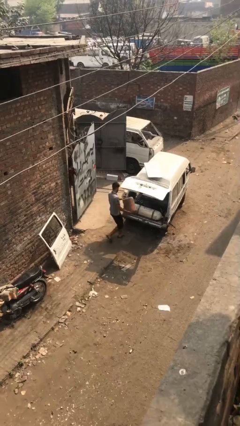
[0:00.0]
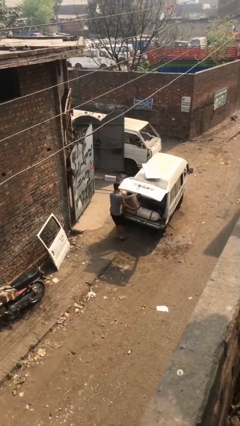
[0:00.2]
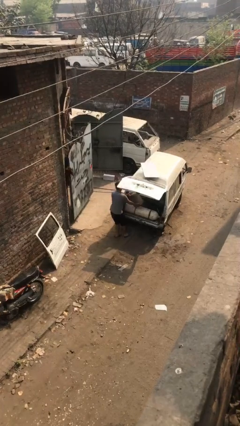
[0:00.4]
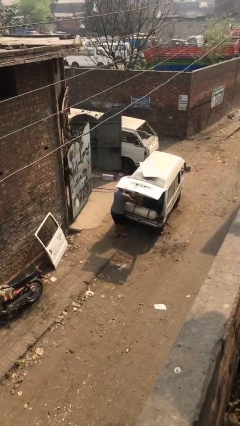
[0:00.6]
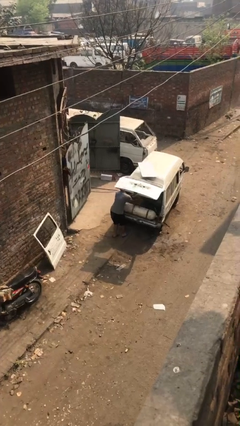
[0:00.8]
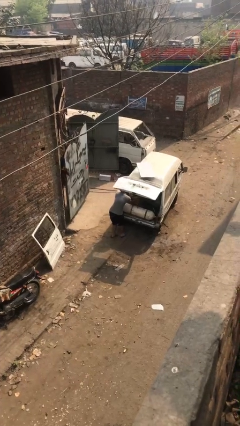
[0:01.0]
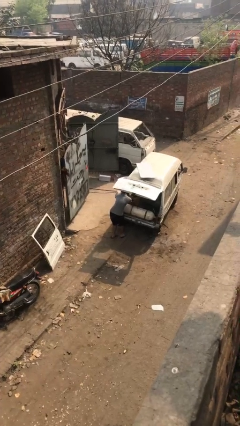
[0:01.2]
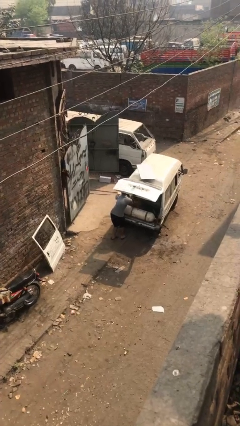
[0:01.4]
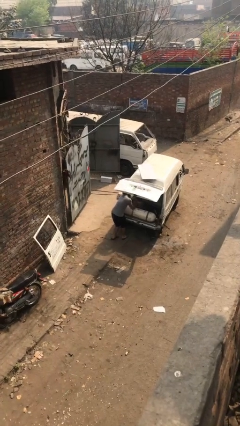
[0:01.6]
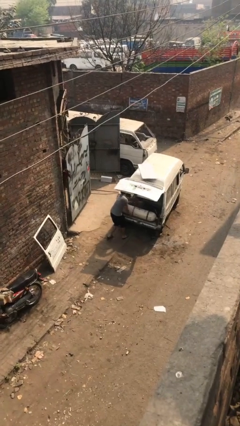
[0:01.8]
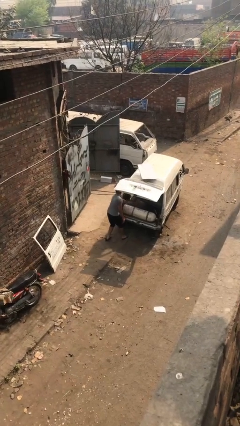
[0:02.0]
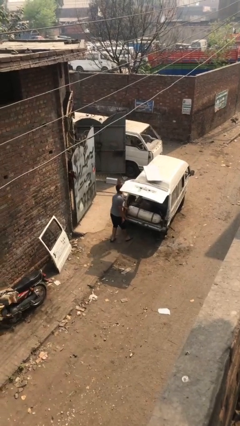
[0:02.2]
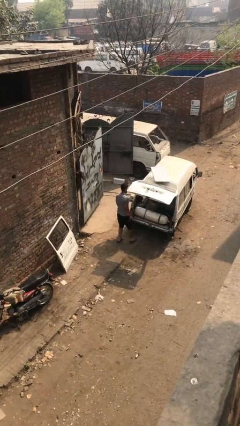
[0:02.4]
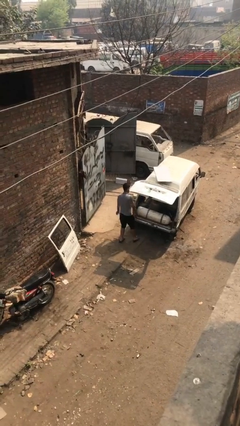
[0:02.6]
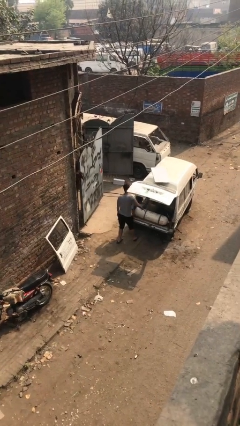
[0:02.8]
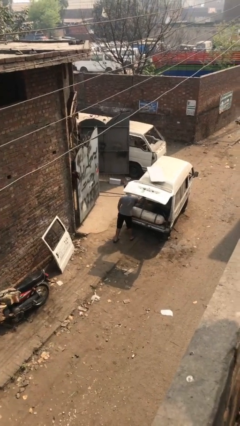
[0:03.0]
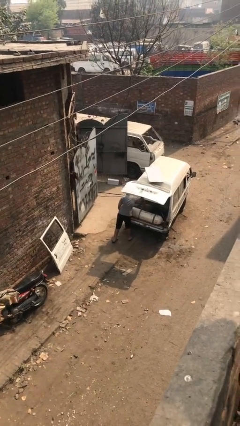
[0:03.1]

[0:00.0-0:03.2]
person loads car

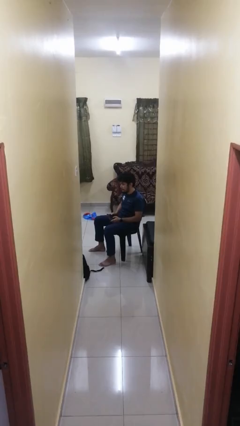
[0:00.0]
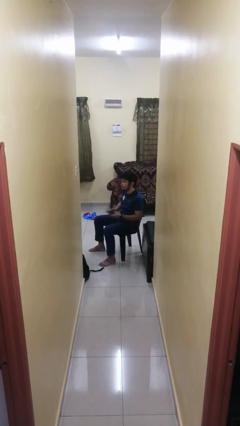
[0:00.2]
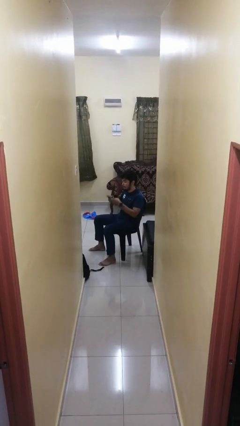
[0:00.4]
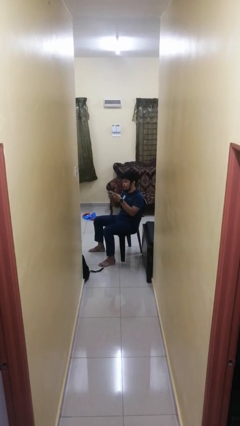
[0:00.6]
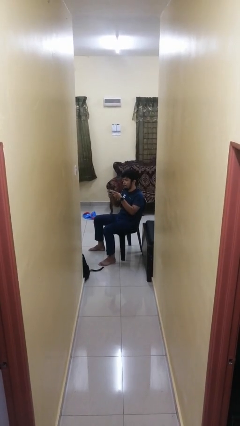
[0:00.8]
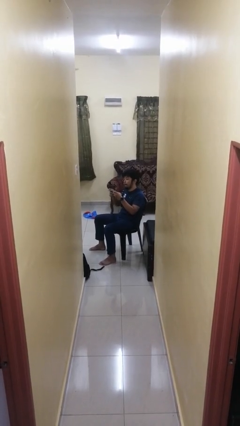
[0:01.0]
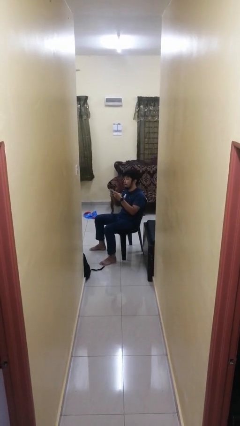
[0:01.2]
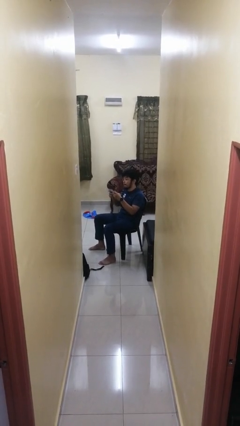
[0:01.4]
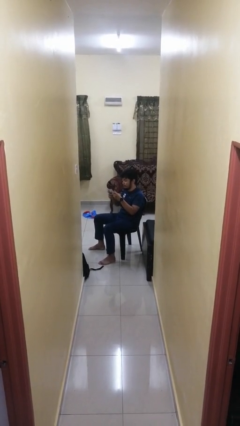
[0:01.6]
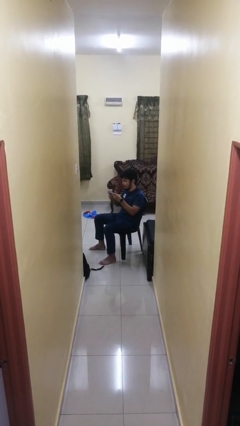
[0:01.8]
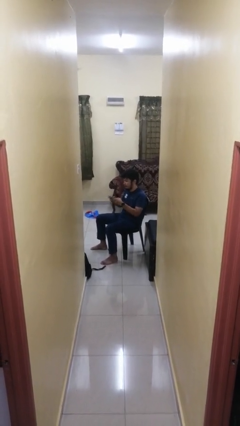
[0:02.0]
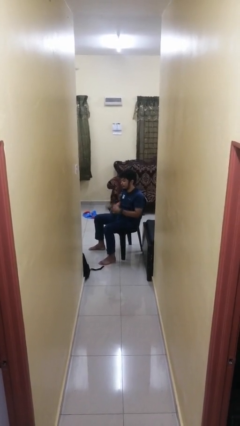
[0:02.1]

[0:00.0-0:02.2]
person interacts with handheld game

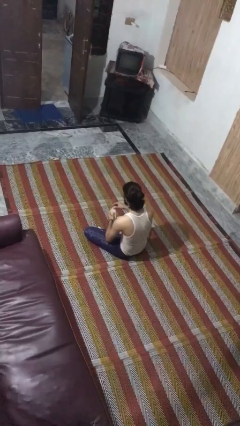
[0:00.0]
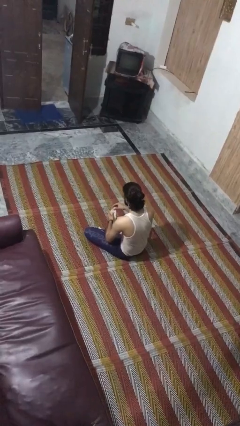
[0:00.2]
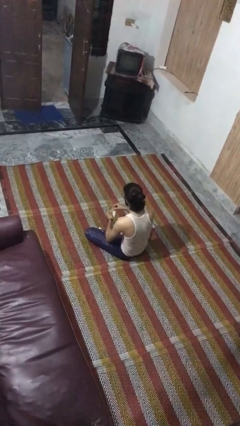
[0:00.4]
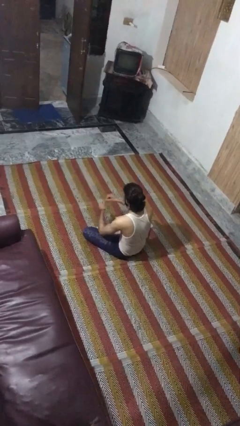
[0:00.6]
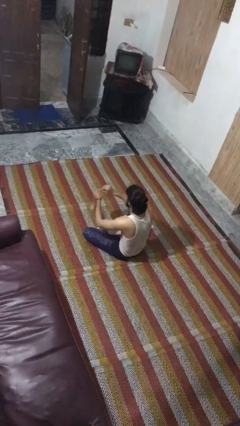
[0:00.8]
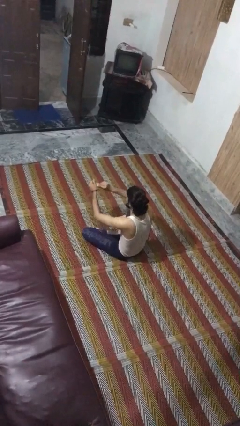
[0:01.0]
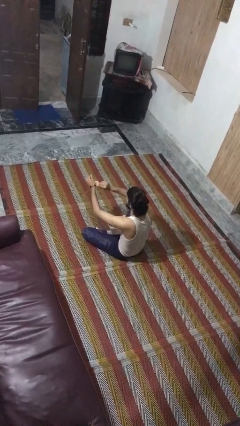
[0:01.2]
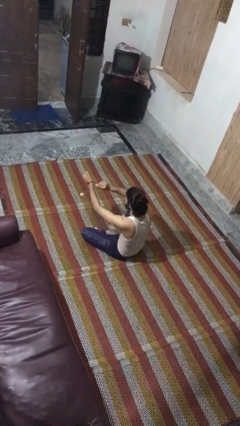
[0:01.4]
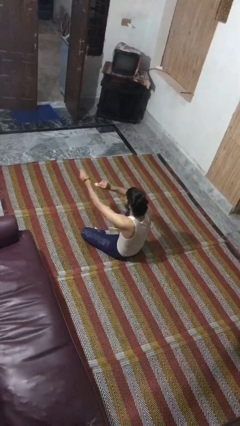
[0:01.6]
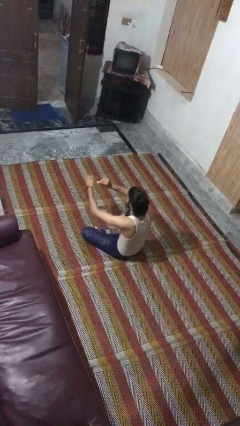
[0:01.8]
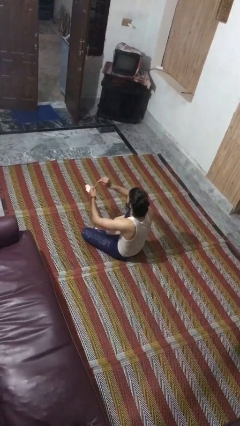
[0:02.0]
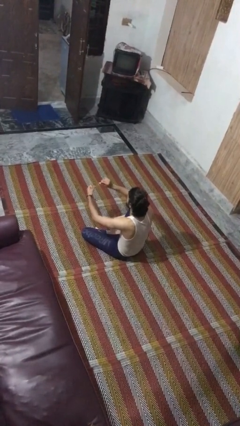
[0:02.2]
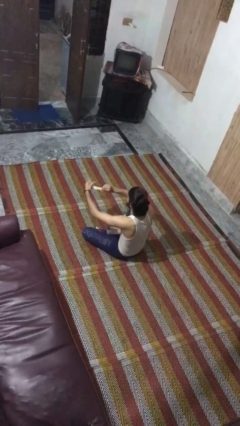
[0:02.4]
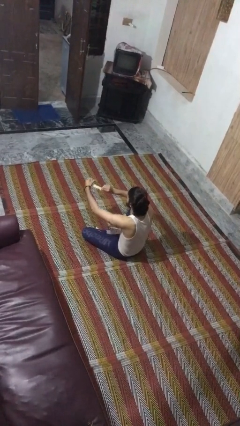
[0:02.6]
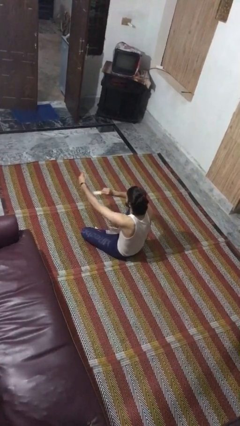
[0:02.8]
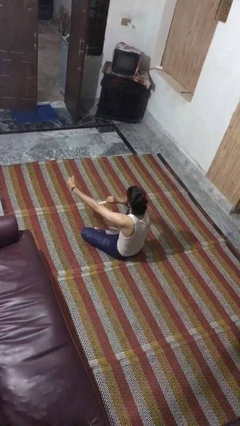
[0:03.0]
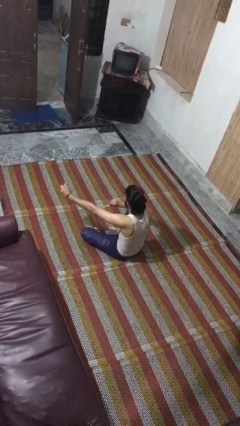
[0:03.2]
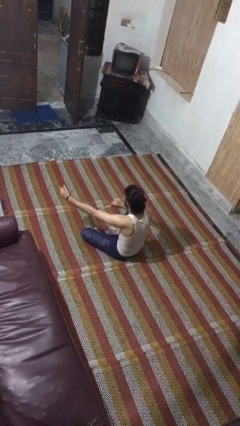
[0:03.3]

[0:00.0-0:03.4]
person tears paper

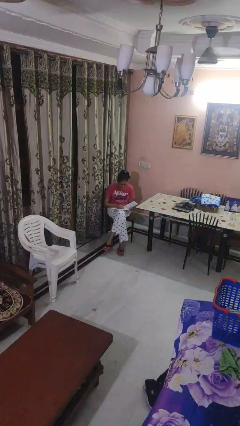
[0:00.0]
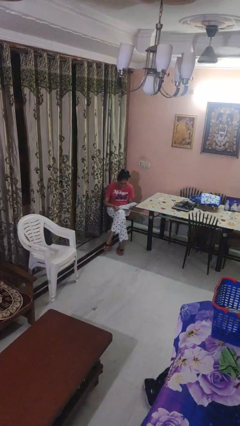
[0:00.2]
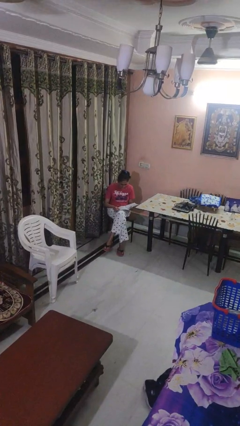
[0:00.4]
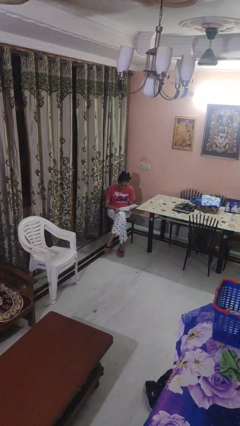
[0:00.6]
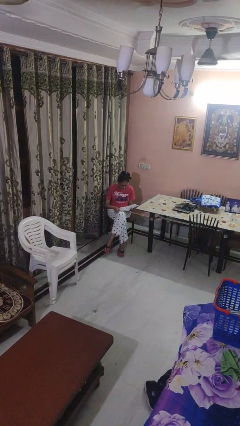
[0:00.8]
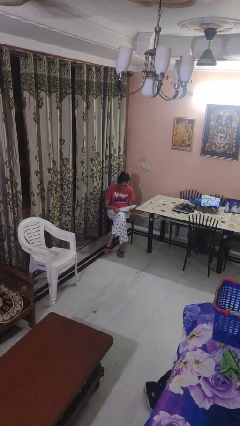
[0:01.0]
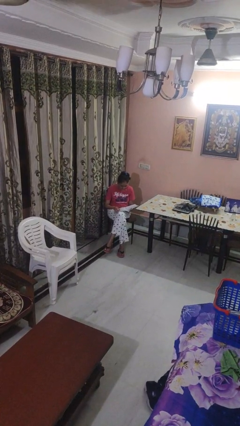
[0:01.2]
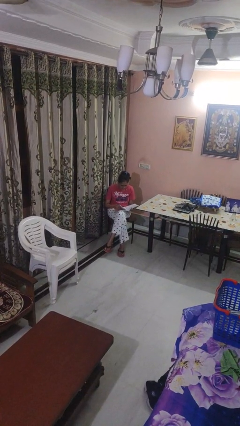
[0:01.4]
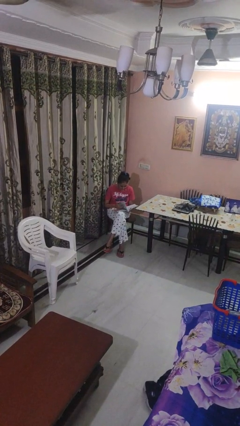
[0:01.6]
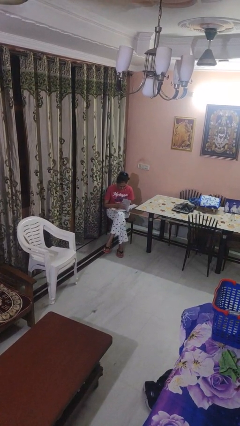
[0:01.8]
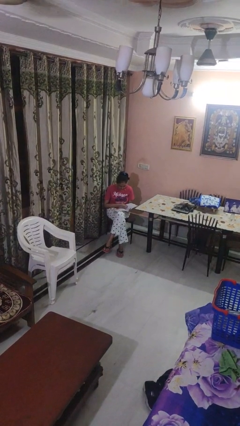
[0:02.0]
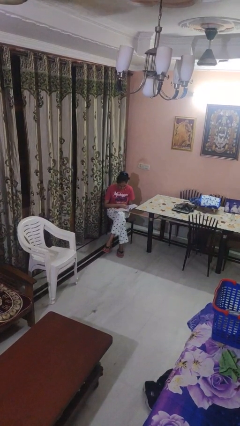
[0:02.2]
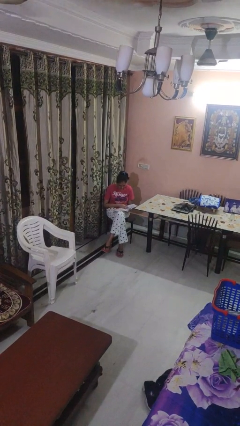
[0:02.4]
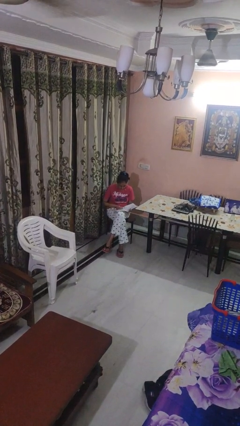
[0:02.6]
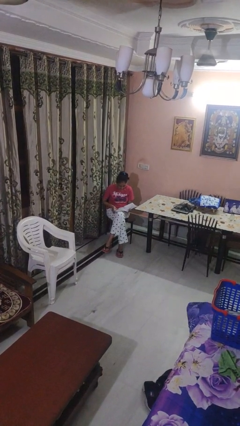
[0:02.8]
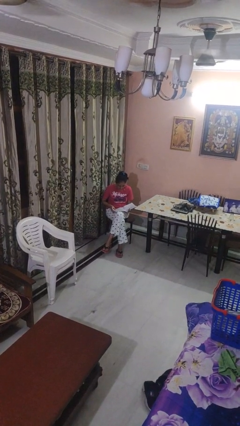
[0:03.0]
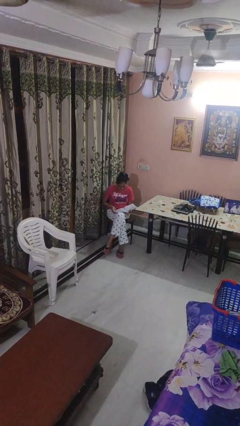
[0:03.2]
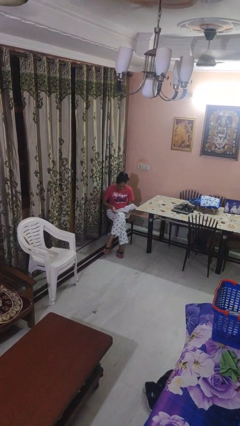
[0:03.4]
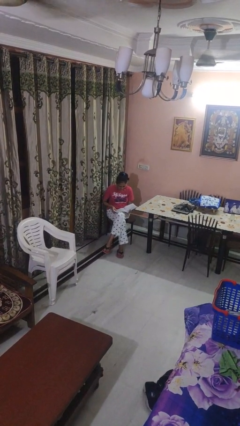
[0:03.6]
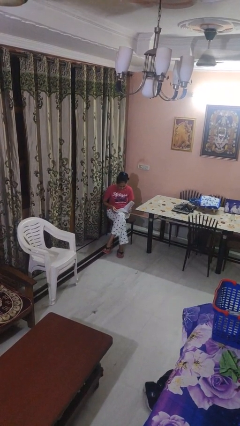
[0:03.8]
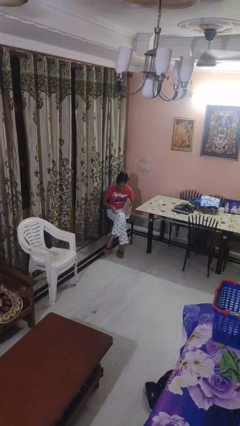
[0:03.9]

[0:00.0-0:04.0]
person reads magazine

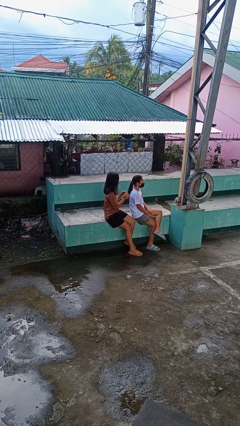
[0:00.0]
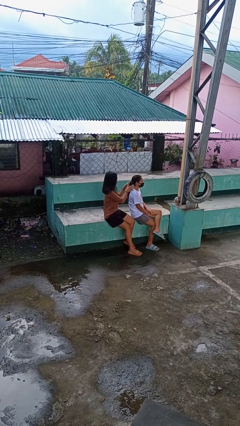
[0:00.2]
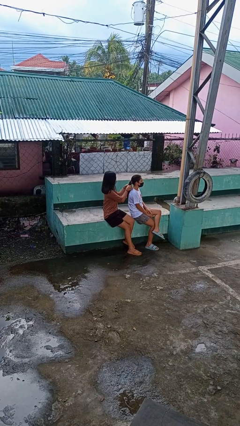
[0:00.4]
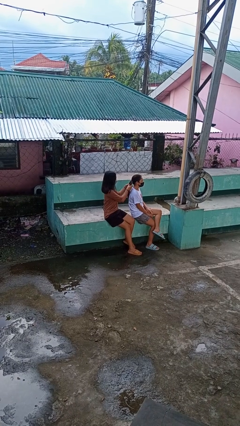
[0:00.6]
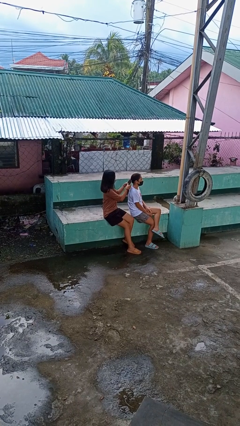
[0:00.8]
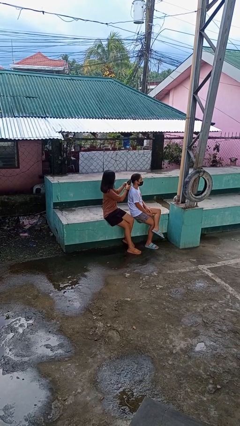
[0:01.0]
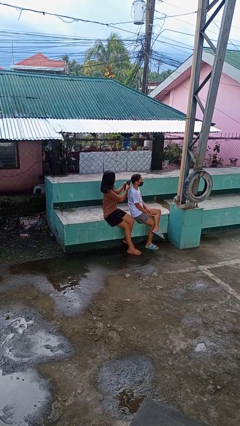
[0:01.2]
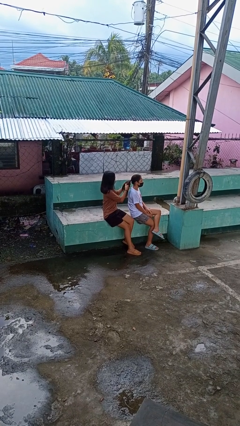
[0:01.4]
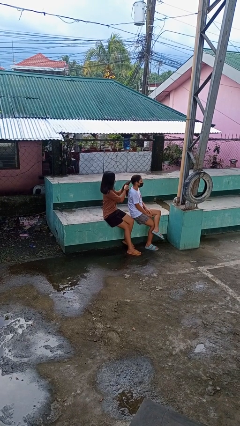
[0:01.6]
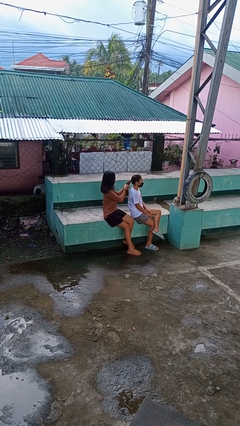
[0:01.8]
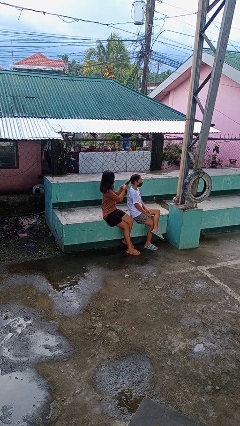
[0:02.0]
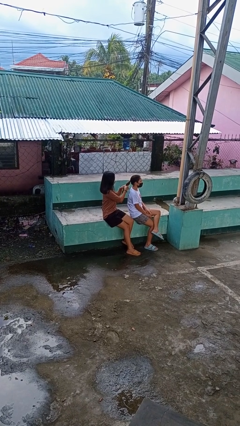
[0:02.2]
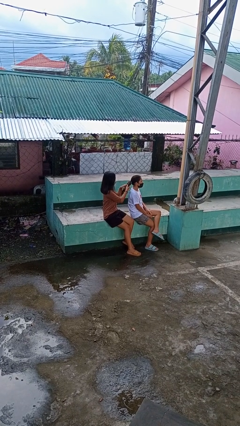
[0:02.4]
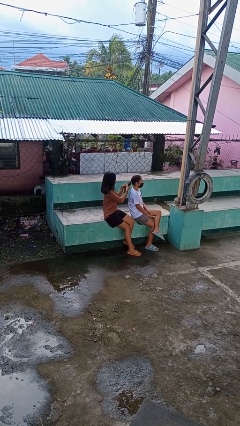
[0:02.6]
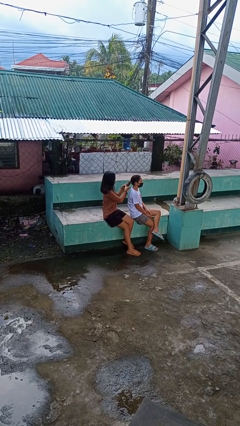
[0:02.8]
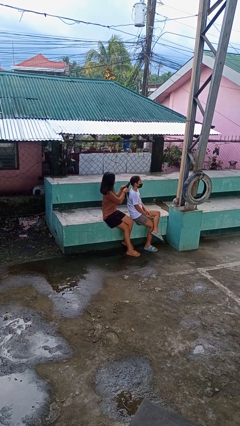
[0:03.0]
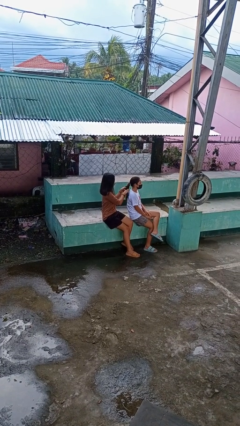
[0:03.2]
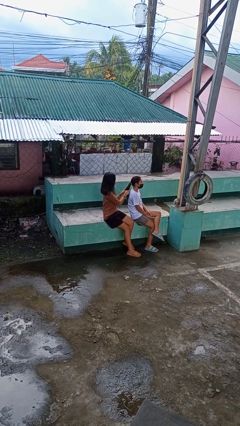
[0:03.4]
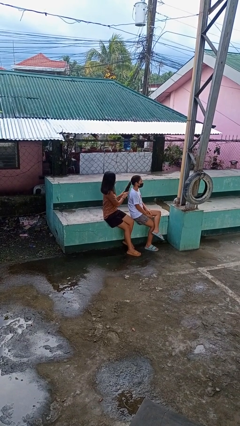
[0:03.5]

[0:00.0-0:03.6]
person braids hair of person

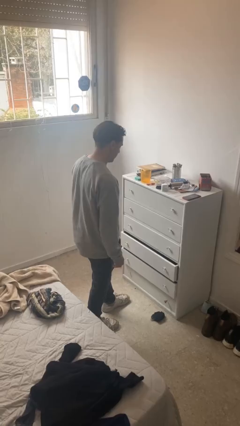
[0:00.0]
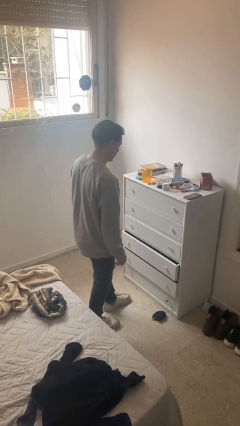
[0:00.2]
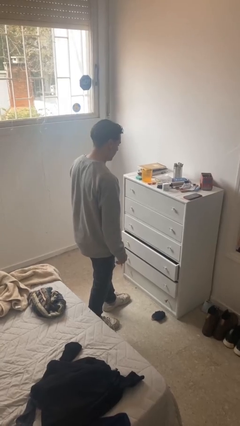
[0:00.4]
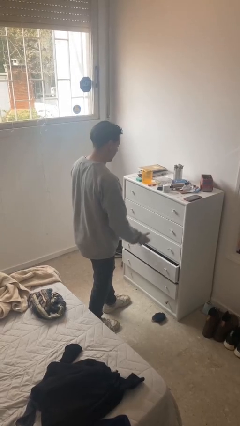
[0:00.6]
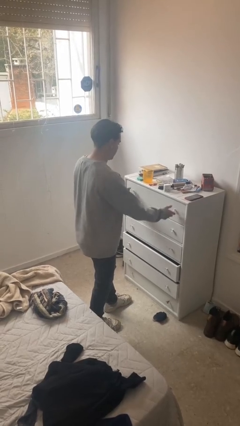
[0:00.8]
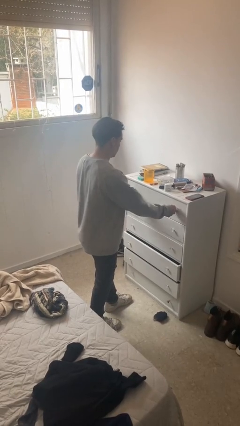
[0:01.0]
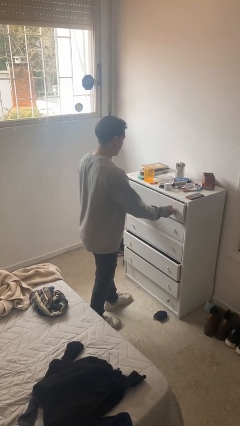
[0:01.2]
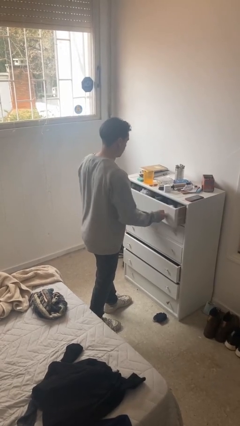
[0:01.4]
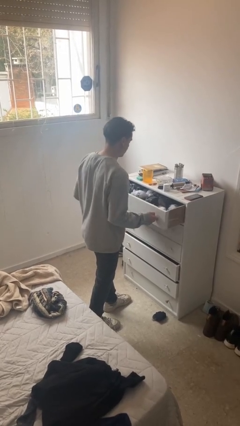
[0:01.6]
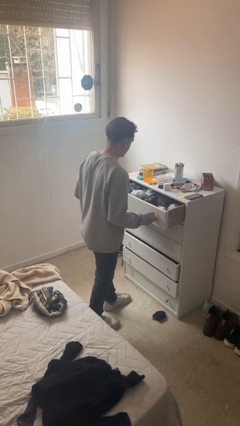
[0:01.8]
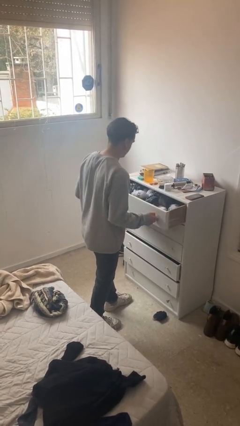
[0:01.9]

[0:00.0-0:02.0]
person opens dresser drawer
